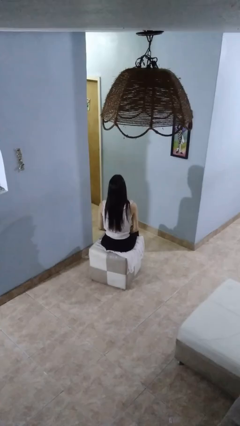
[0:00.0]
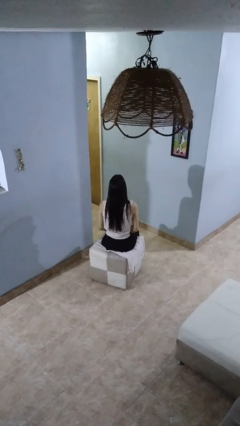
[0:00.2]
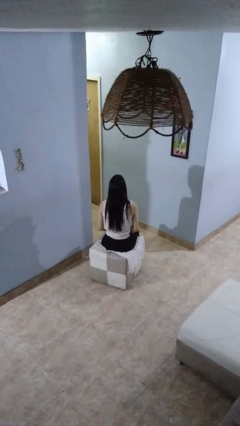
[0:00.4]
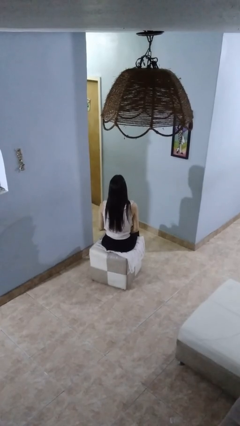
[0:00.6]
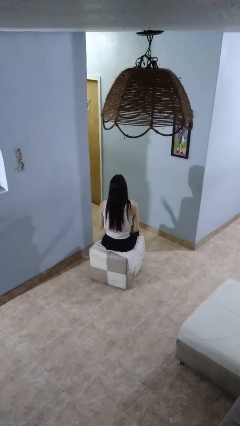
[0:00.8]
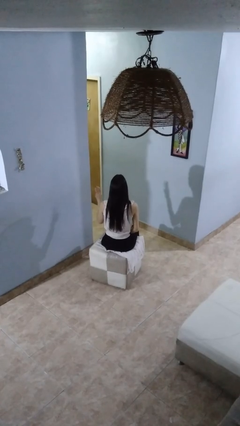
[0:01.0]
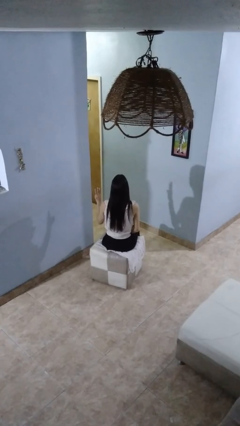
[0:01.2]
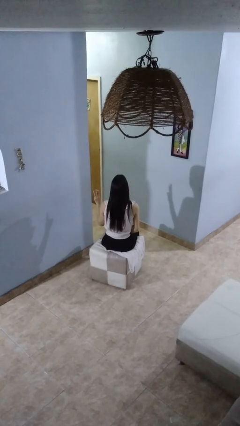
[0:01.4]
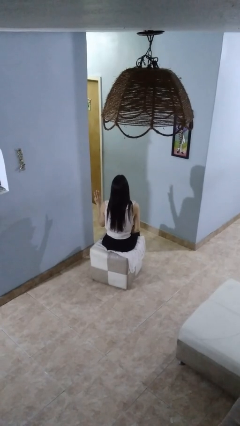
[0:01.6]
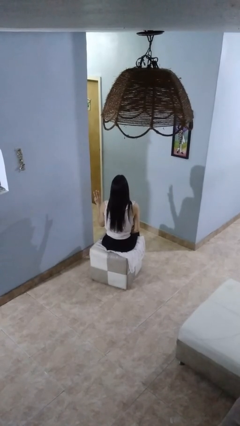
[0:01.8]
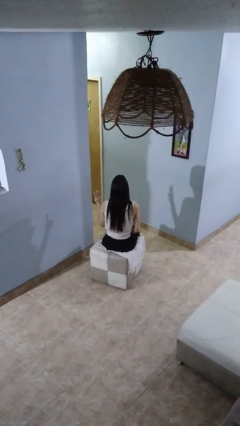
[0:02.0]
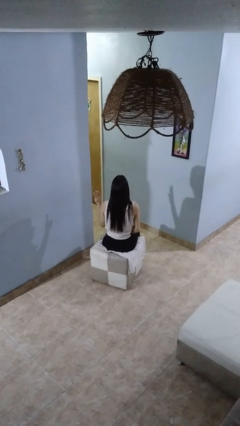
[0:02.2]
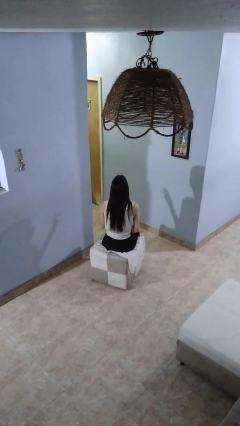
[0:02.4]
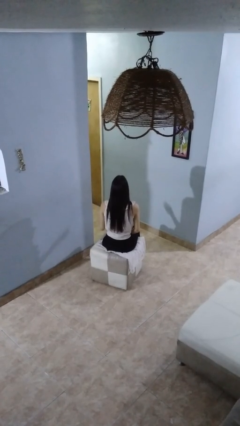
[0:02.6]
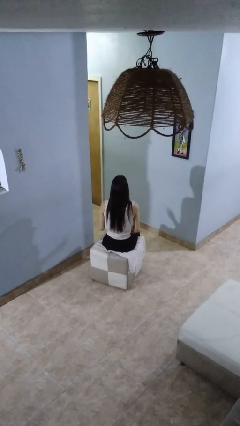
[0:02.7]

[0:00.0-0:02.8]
person gestures number three

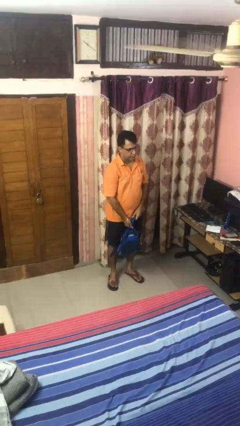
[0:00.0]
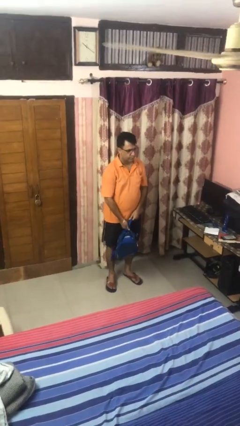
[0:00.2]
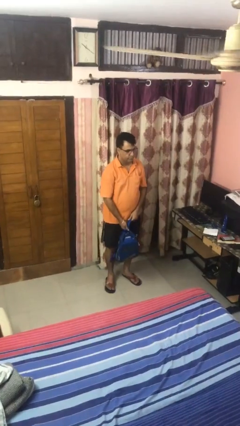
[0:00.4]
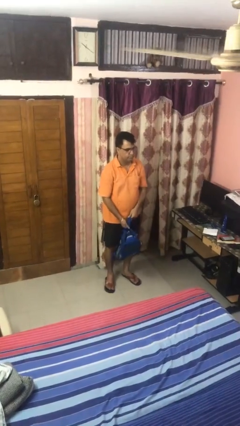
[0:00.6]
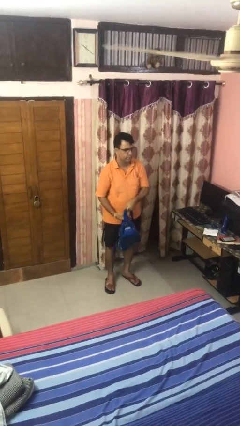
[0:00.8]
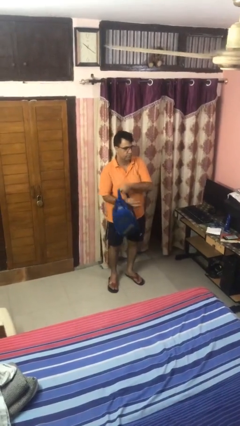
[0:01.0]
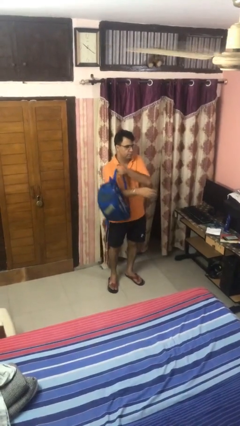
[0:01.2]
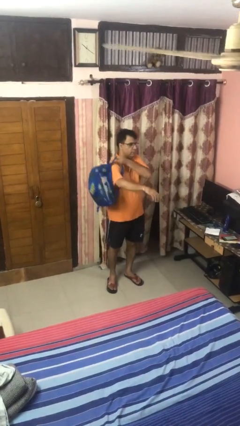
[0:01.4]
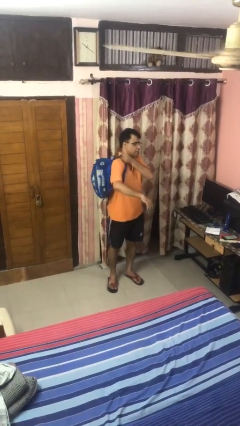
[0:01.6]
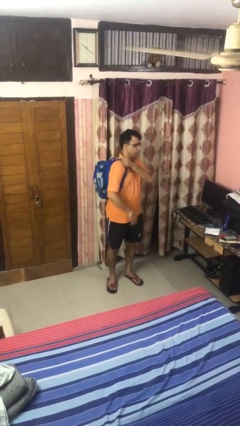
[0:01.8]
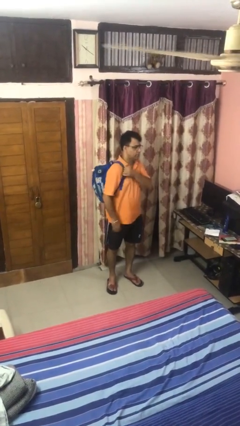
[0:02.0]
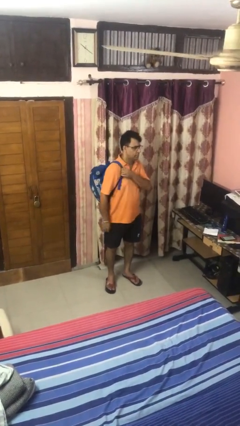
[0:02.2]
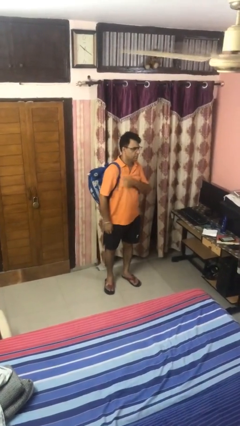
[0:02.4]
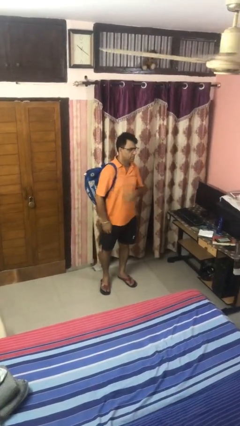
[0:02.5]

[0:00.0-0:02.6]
person puts on backpack

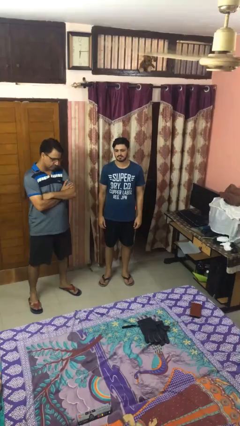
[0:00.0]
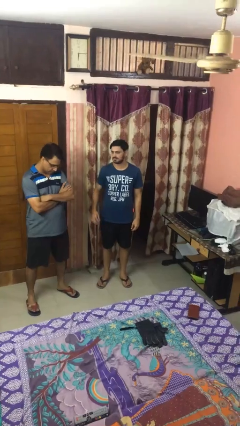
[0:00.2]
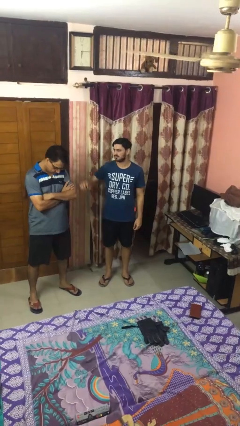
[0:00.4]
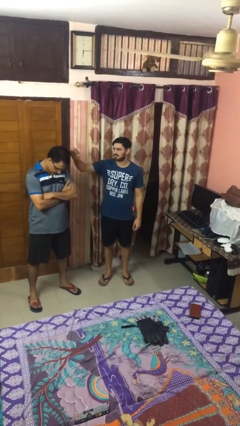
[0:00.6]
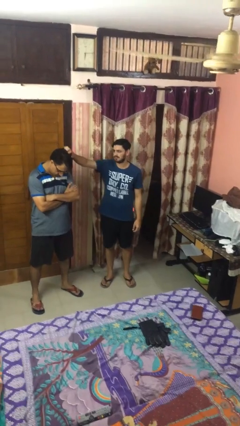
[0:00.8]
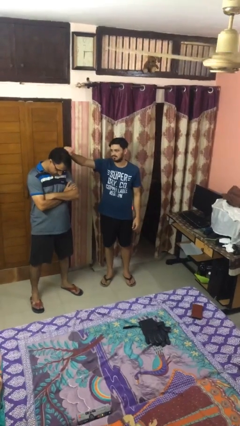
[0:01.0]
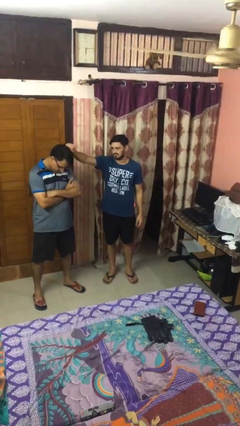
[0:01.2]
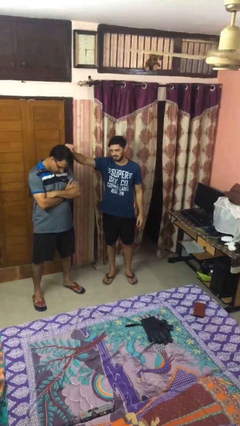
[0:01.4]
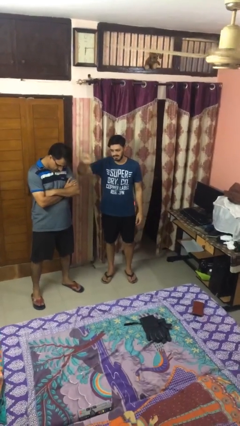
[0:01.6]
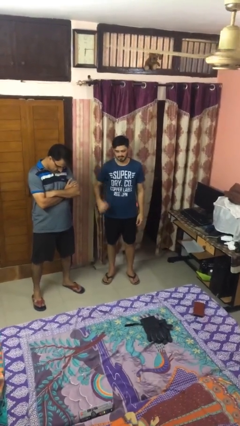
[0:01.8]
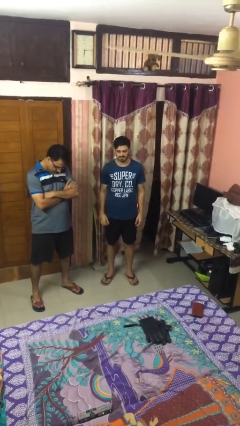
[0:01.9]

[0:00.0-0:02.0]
person grabs person by hair

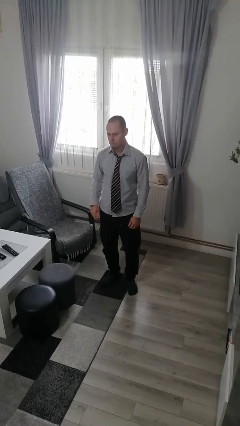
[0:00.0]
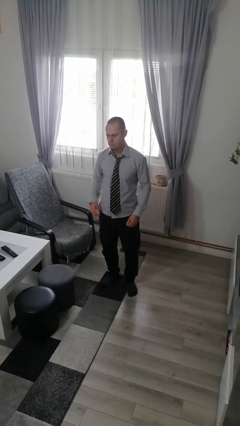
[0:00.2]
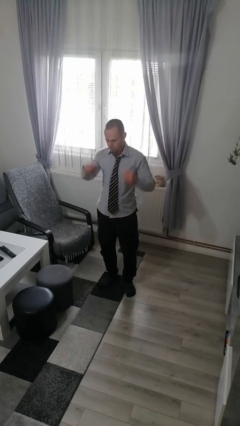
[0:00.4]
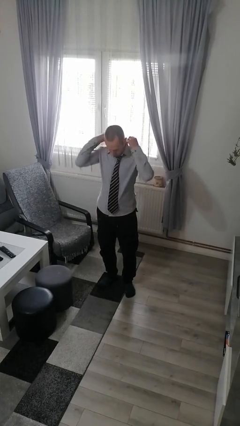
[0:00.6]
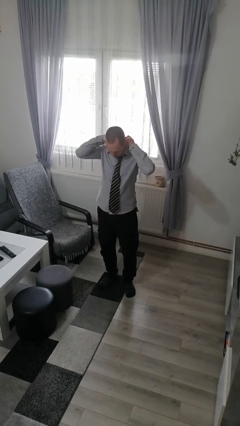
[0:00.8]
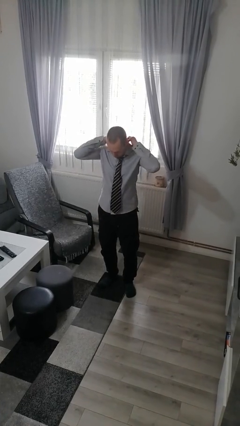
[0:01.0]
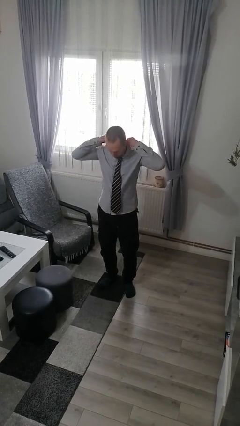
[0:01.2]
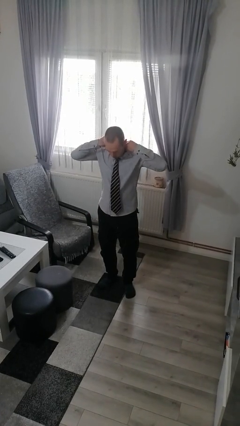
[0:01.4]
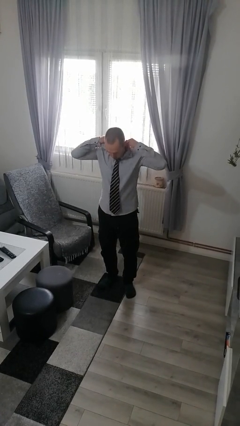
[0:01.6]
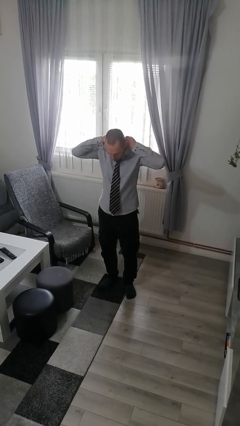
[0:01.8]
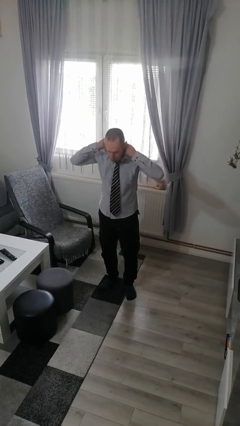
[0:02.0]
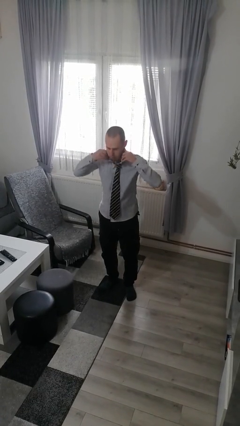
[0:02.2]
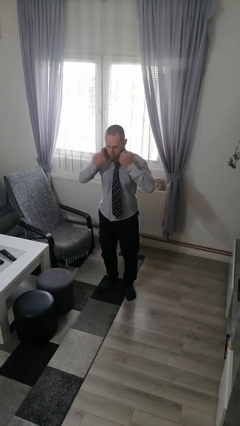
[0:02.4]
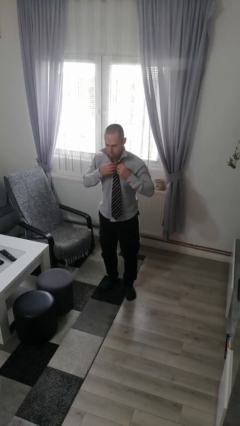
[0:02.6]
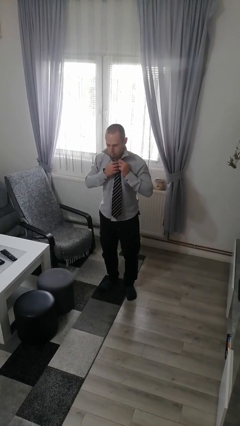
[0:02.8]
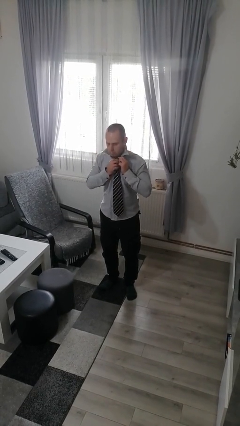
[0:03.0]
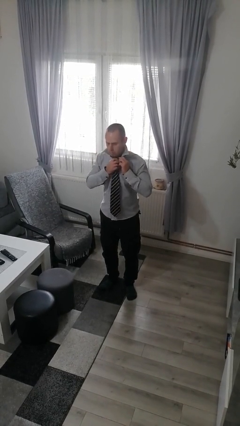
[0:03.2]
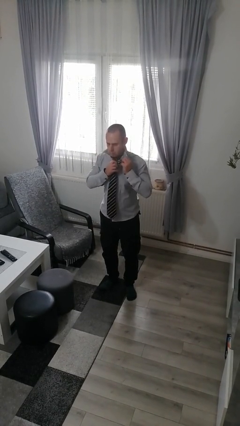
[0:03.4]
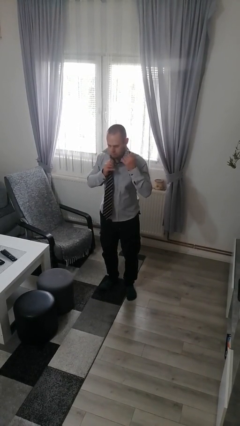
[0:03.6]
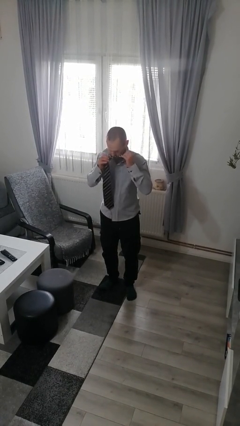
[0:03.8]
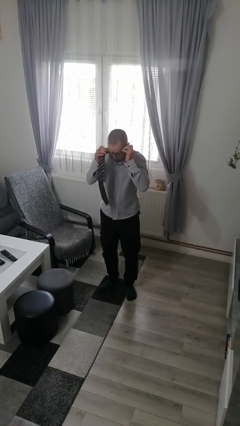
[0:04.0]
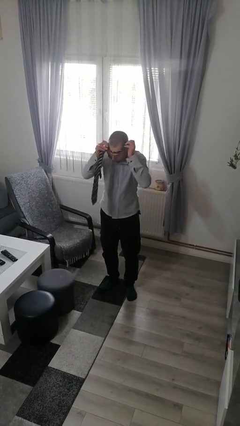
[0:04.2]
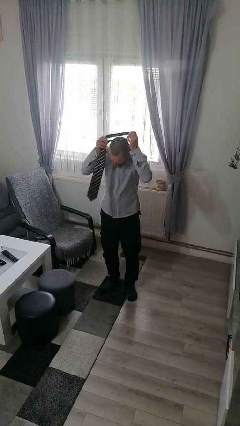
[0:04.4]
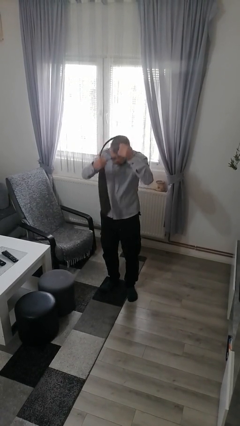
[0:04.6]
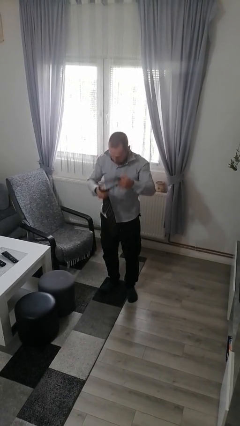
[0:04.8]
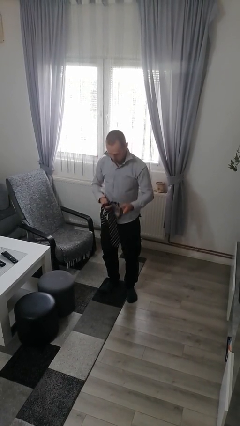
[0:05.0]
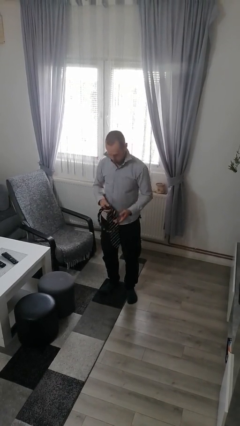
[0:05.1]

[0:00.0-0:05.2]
person takes off necktie

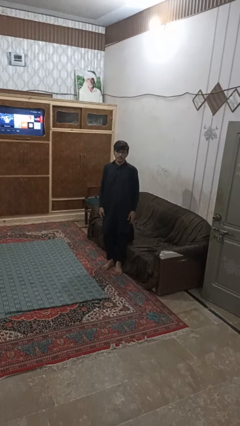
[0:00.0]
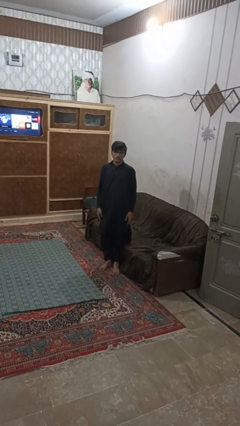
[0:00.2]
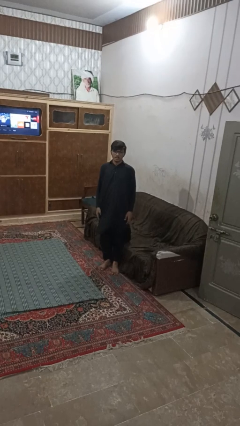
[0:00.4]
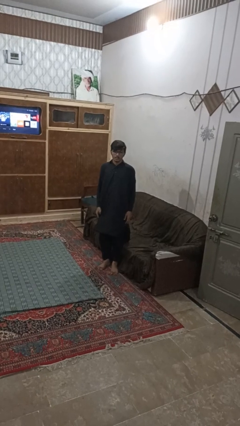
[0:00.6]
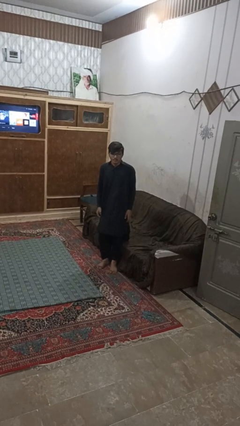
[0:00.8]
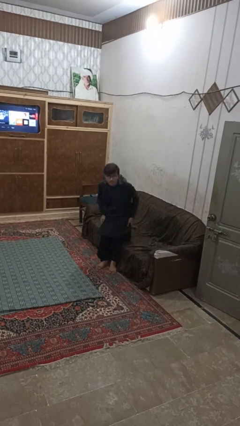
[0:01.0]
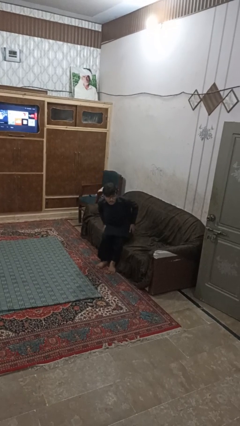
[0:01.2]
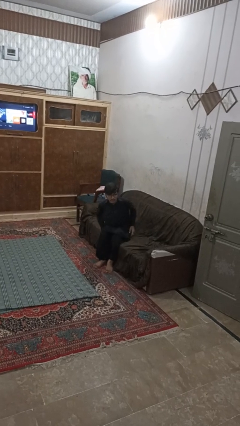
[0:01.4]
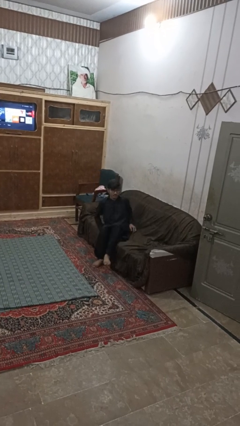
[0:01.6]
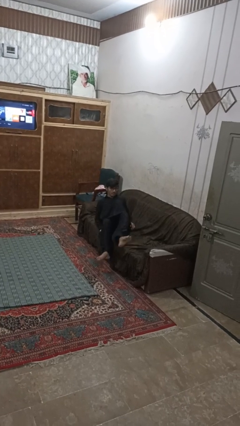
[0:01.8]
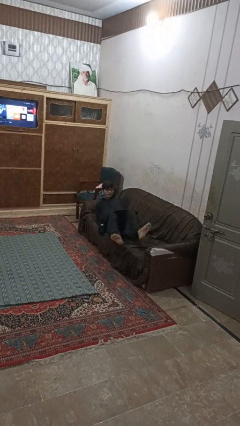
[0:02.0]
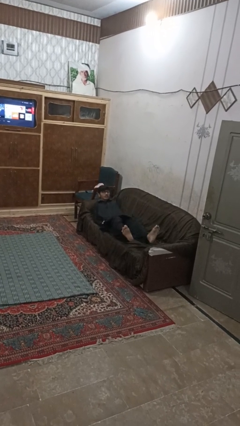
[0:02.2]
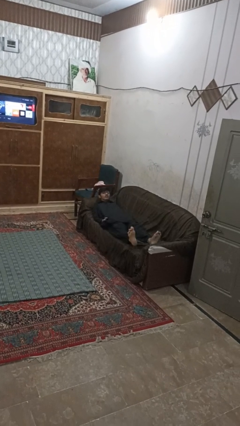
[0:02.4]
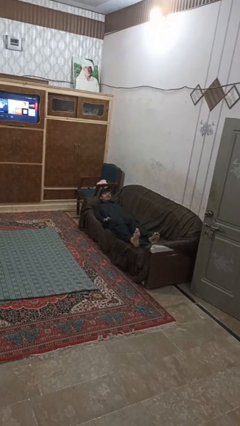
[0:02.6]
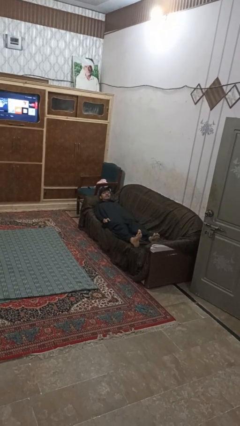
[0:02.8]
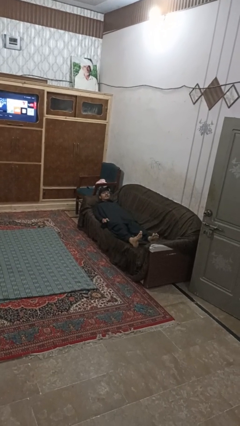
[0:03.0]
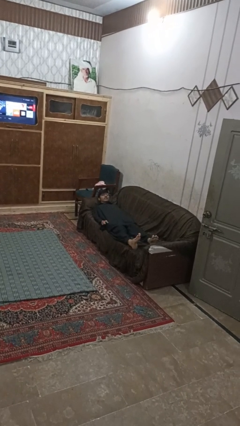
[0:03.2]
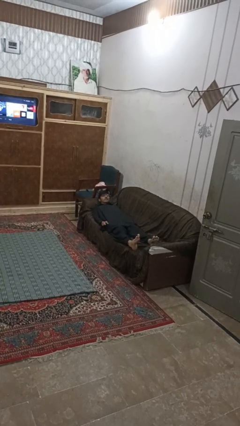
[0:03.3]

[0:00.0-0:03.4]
person lies down on couch

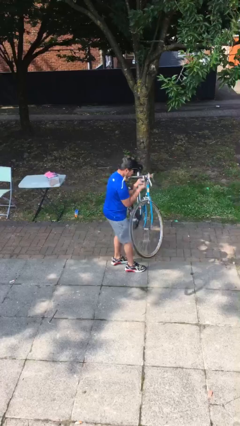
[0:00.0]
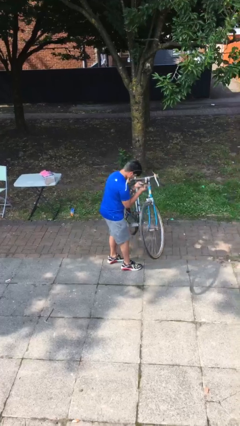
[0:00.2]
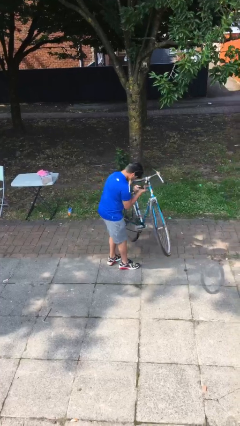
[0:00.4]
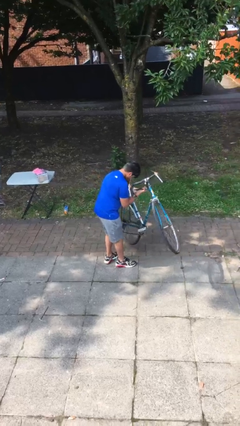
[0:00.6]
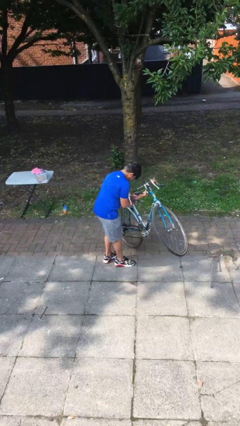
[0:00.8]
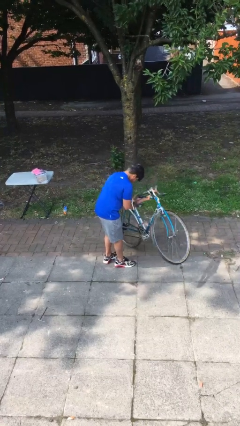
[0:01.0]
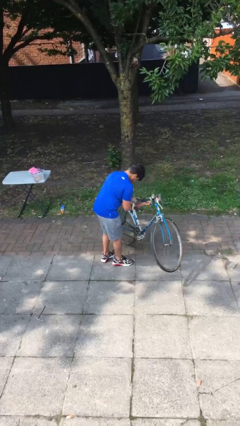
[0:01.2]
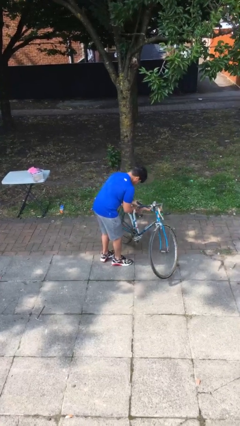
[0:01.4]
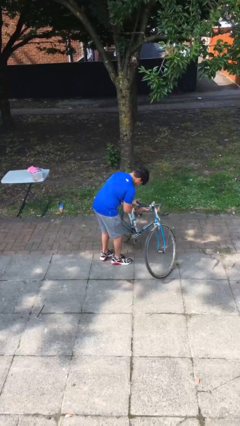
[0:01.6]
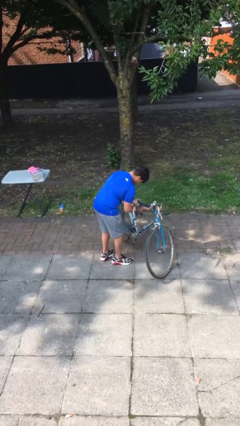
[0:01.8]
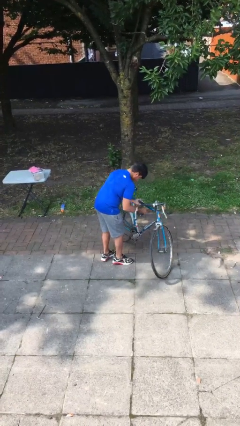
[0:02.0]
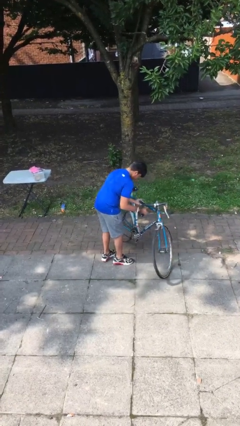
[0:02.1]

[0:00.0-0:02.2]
person puts down object on floor
